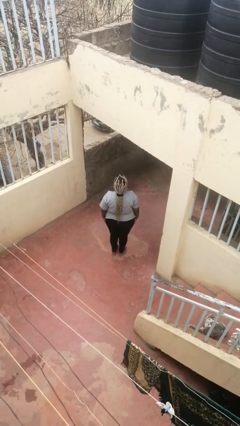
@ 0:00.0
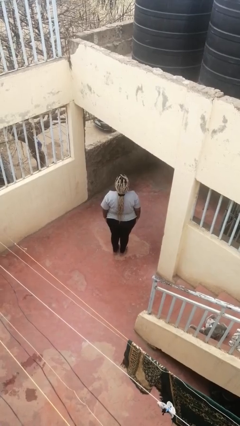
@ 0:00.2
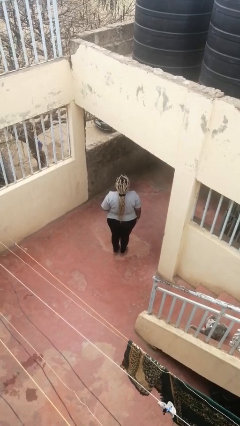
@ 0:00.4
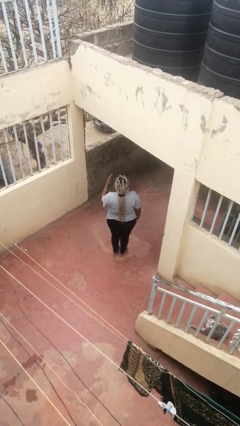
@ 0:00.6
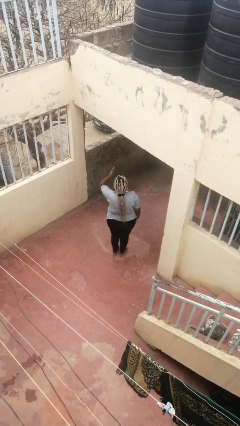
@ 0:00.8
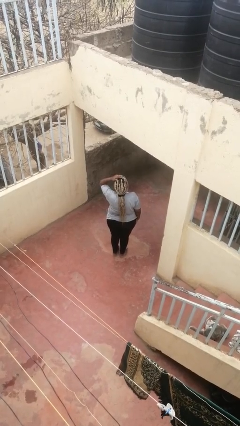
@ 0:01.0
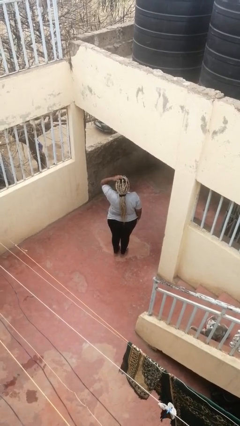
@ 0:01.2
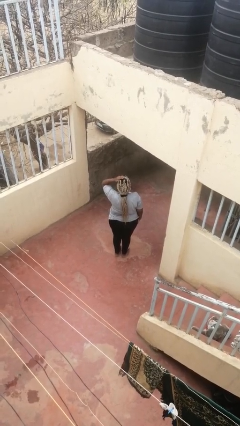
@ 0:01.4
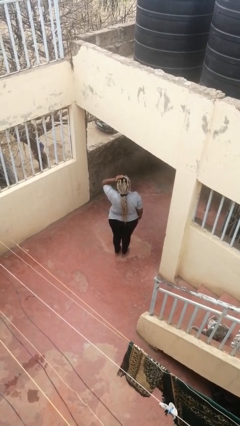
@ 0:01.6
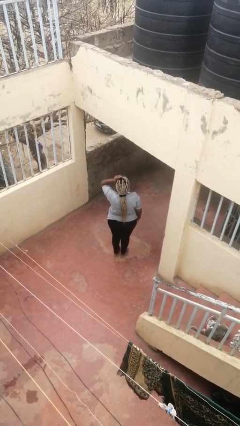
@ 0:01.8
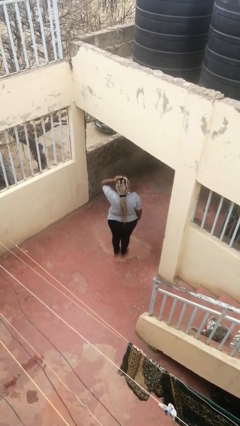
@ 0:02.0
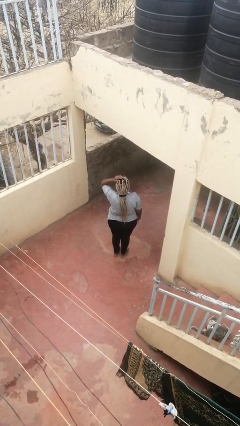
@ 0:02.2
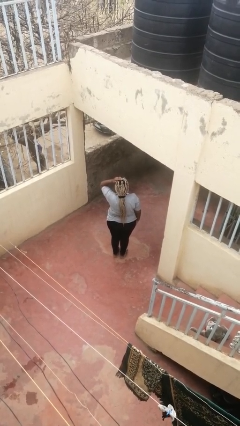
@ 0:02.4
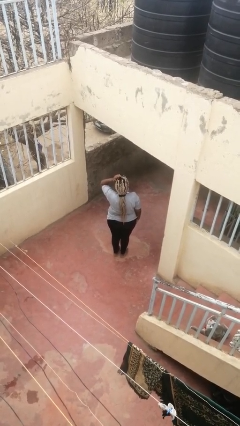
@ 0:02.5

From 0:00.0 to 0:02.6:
person pats head

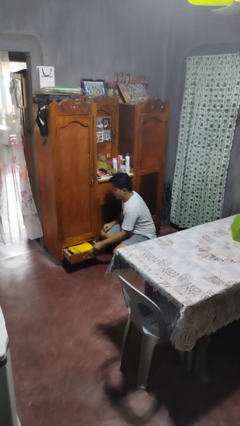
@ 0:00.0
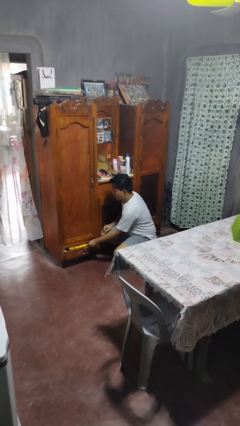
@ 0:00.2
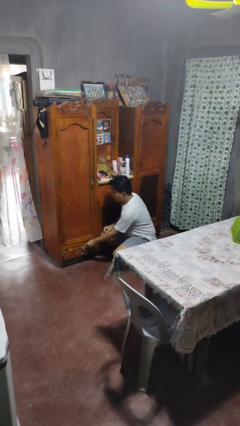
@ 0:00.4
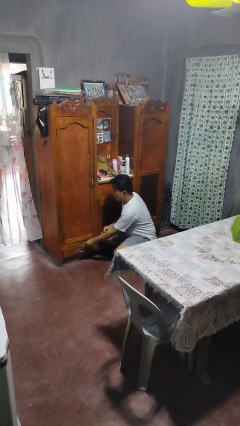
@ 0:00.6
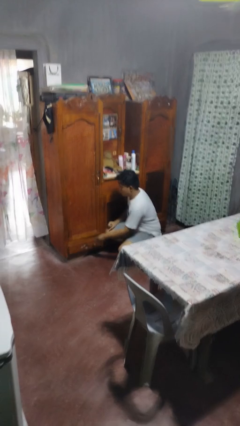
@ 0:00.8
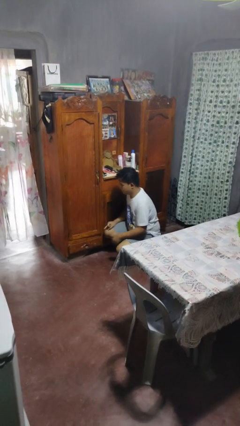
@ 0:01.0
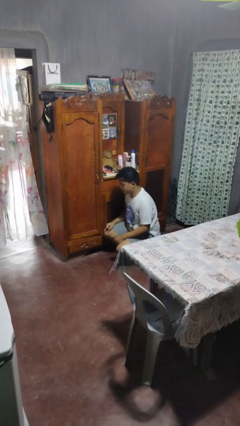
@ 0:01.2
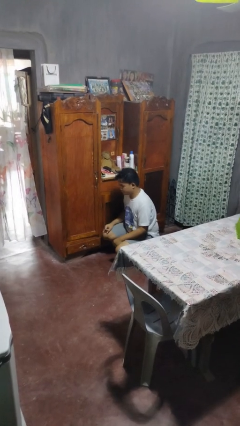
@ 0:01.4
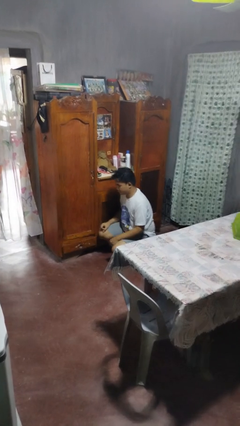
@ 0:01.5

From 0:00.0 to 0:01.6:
person closes dresser drawer

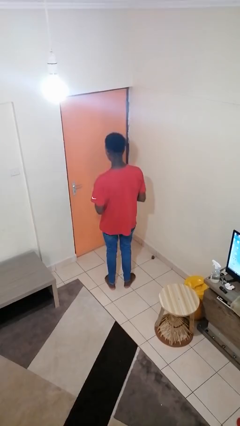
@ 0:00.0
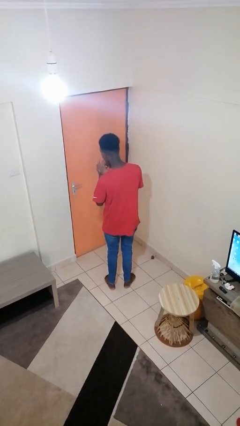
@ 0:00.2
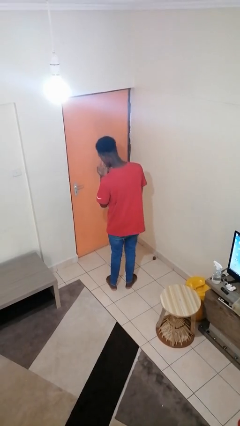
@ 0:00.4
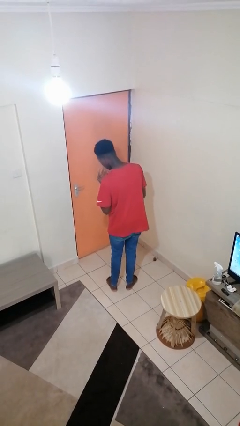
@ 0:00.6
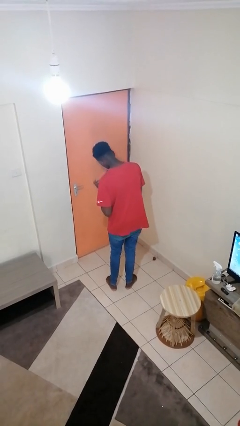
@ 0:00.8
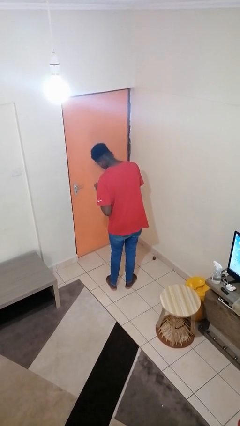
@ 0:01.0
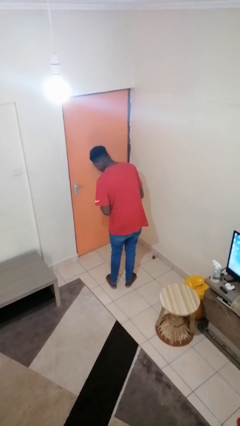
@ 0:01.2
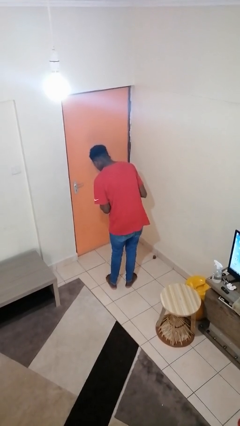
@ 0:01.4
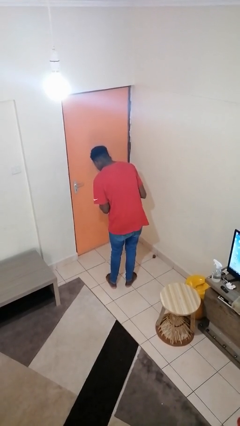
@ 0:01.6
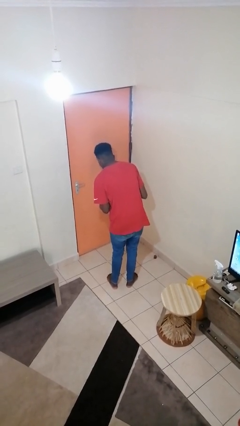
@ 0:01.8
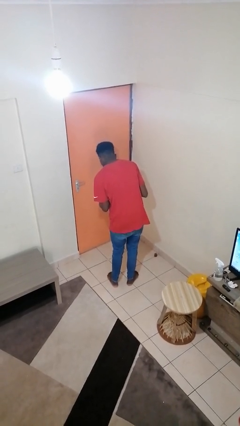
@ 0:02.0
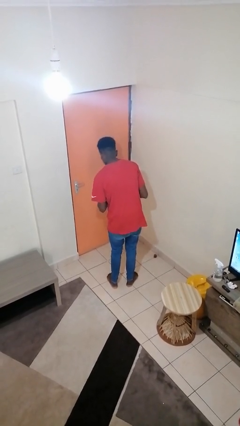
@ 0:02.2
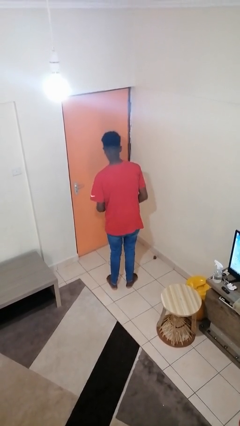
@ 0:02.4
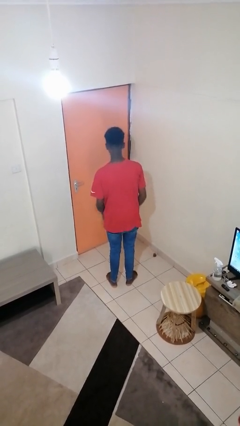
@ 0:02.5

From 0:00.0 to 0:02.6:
person licks fingers

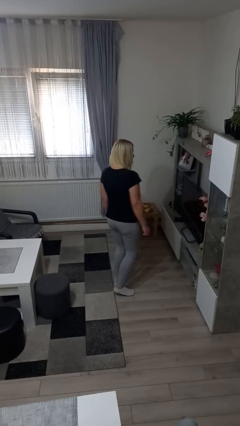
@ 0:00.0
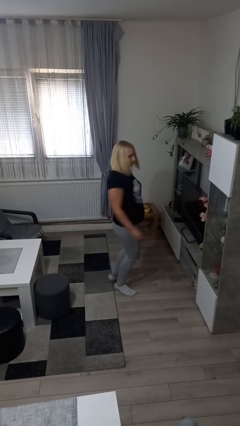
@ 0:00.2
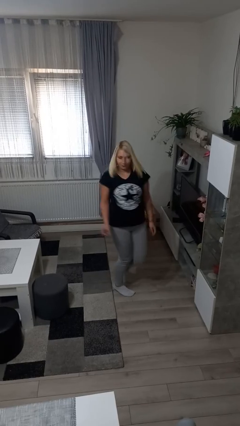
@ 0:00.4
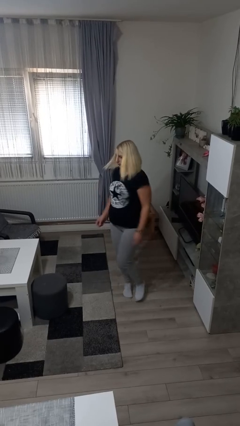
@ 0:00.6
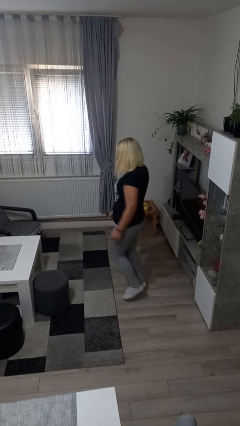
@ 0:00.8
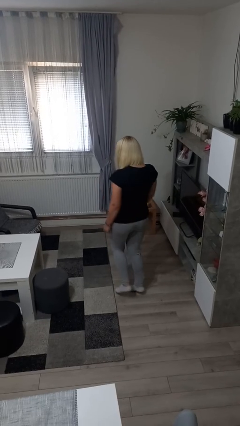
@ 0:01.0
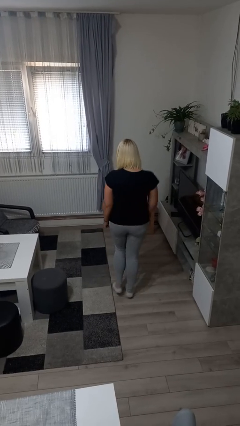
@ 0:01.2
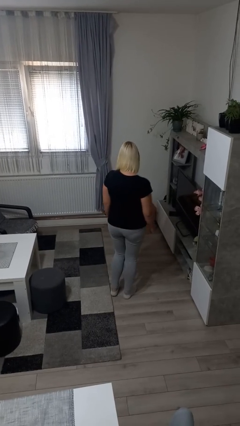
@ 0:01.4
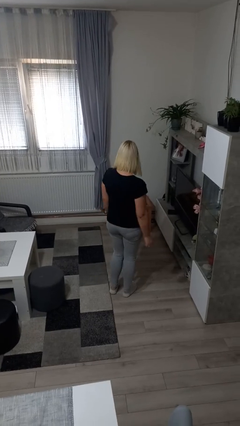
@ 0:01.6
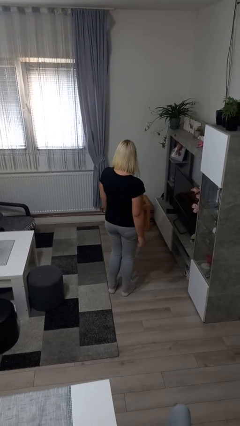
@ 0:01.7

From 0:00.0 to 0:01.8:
person twirls

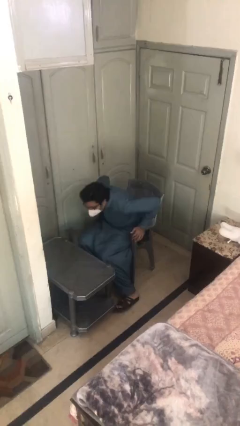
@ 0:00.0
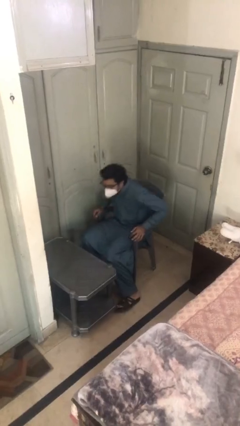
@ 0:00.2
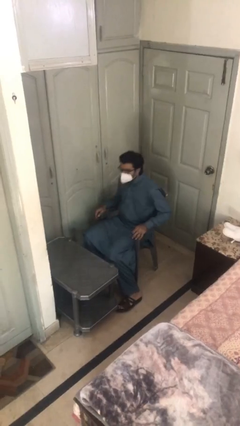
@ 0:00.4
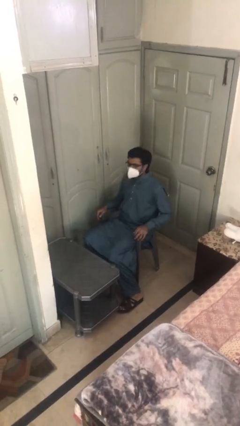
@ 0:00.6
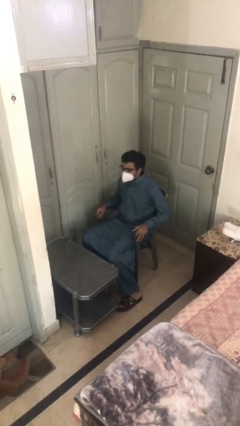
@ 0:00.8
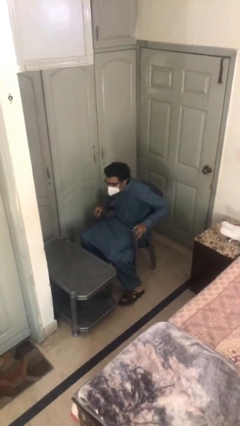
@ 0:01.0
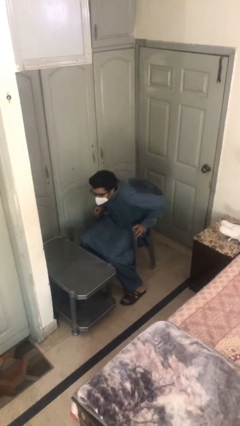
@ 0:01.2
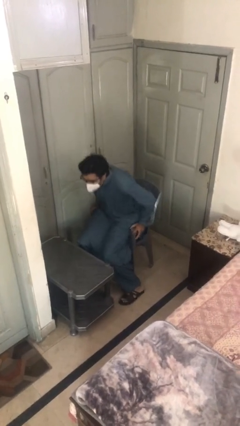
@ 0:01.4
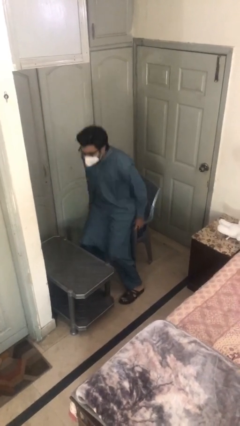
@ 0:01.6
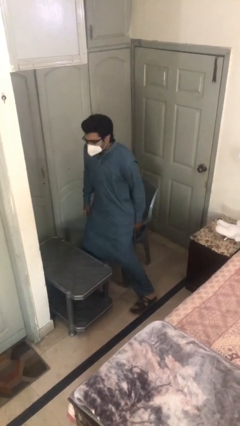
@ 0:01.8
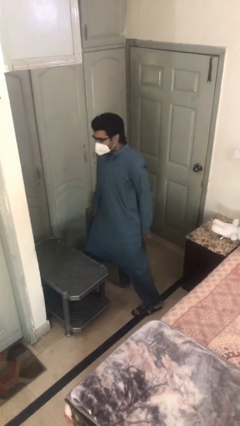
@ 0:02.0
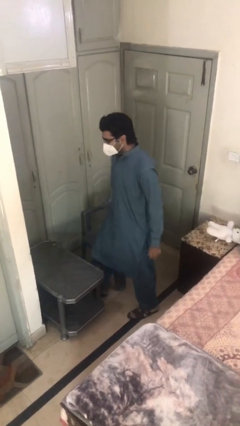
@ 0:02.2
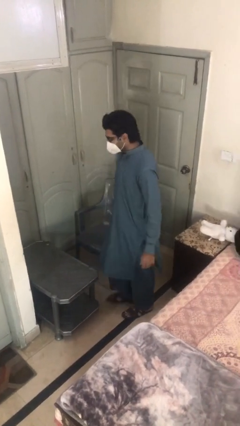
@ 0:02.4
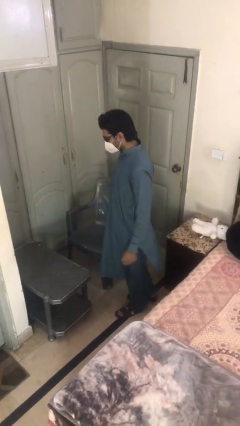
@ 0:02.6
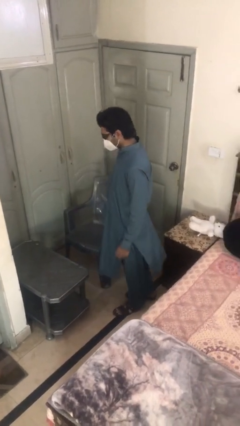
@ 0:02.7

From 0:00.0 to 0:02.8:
person stands up

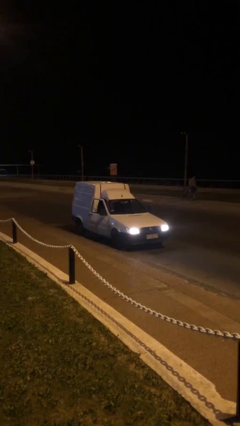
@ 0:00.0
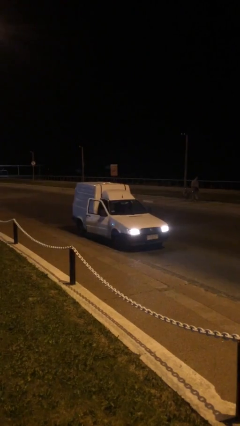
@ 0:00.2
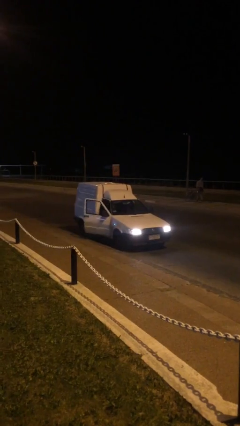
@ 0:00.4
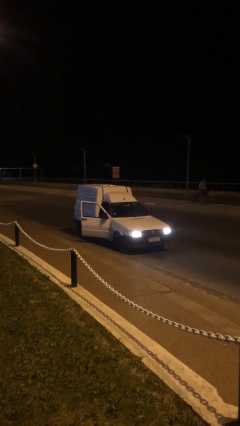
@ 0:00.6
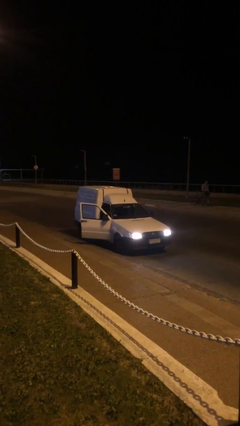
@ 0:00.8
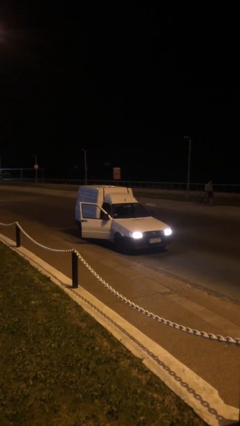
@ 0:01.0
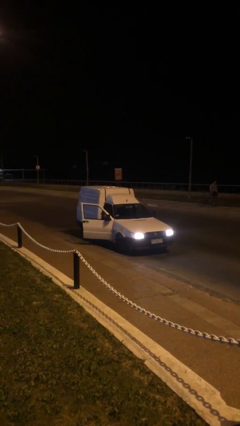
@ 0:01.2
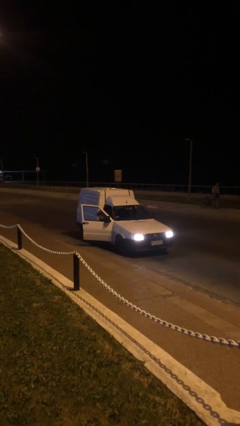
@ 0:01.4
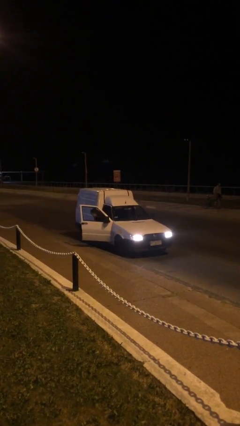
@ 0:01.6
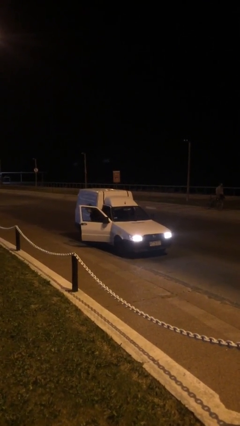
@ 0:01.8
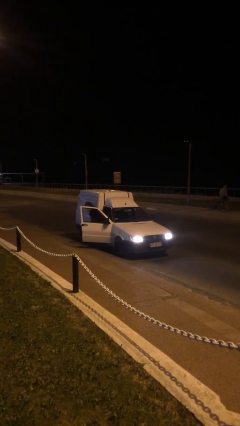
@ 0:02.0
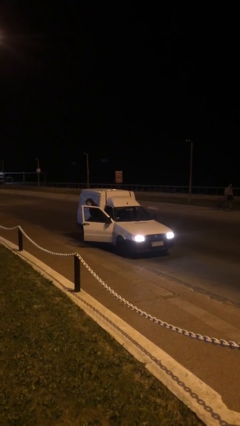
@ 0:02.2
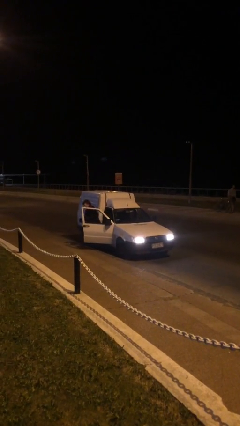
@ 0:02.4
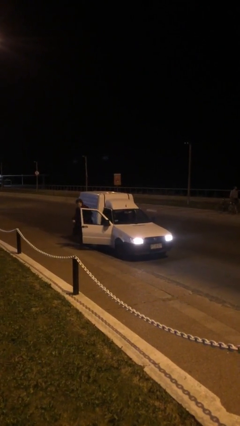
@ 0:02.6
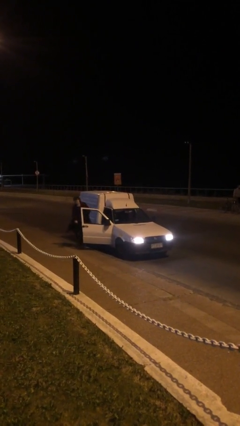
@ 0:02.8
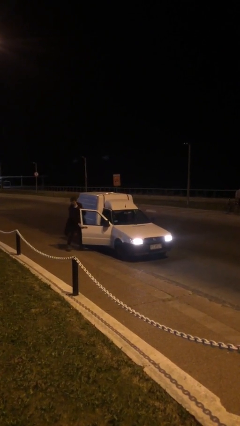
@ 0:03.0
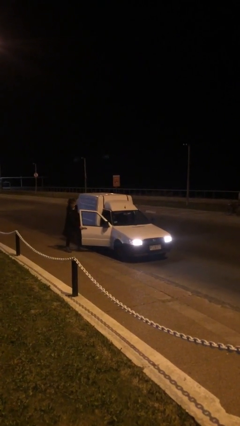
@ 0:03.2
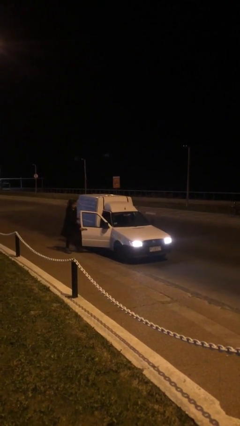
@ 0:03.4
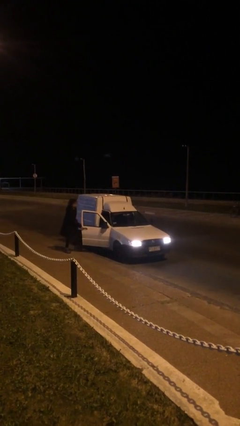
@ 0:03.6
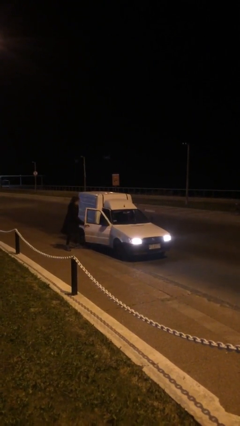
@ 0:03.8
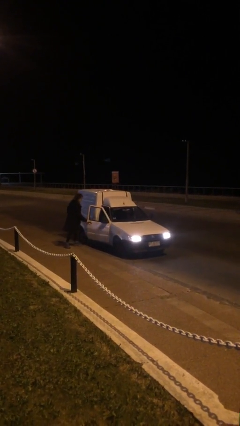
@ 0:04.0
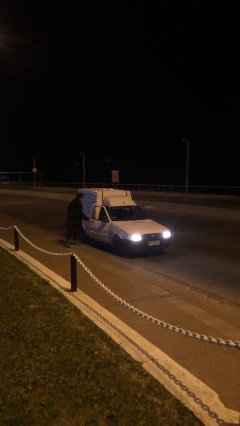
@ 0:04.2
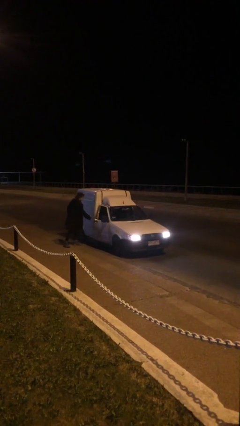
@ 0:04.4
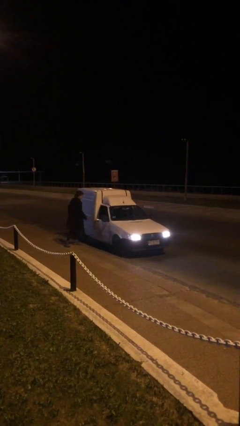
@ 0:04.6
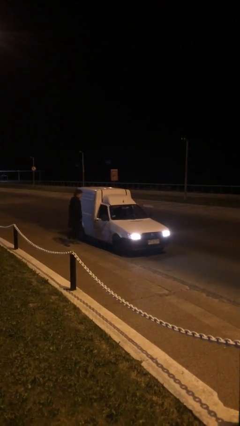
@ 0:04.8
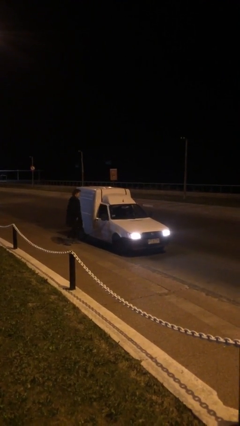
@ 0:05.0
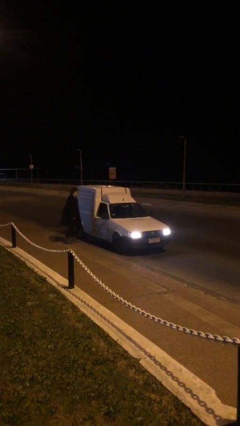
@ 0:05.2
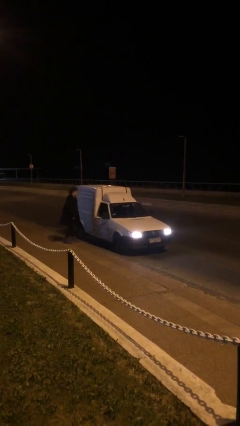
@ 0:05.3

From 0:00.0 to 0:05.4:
car drops off person

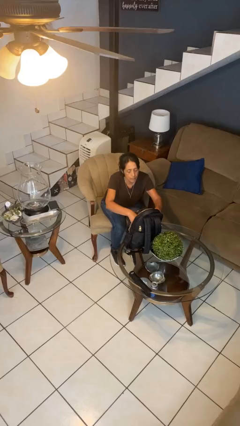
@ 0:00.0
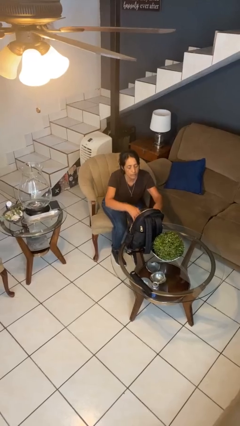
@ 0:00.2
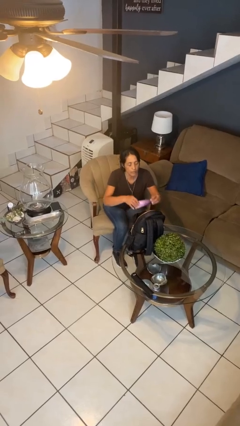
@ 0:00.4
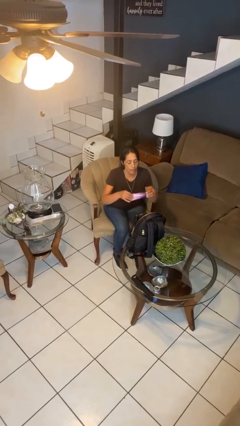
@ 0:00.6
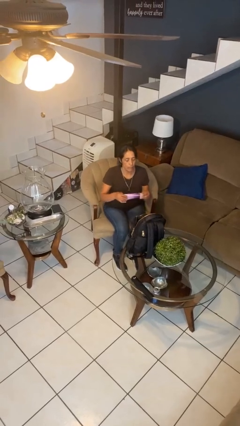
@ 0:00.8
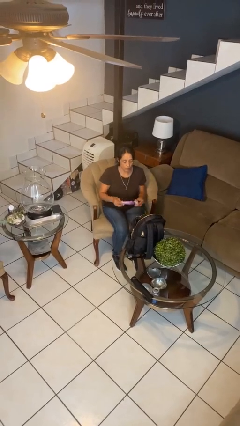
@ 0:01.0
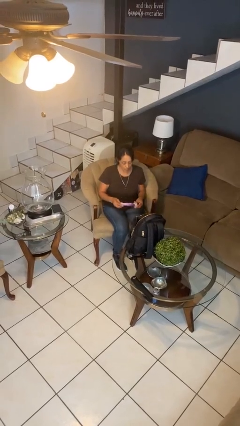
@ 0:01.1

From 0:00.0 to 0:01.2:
person takes object from backpack
